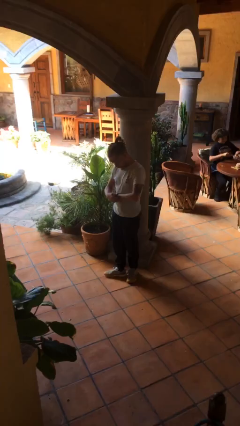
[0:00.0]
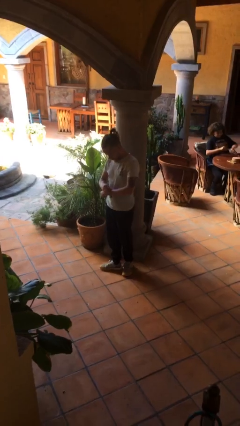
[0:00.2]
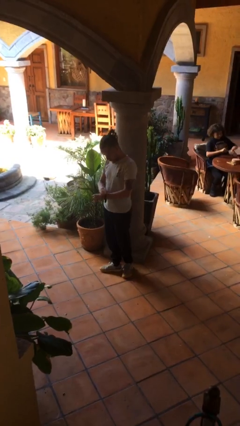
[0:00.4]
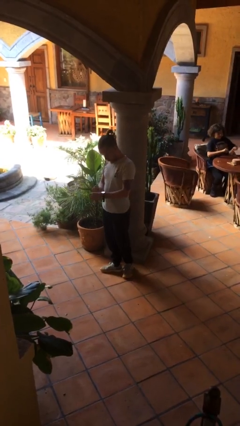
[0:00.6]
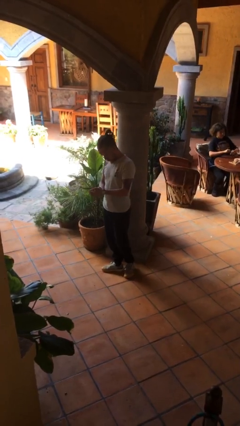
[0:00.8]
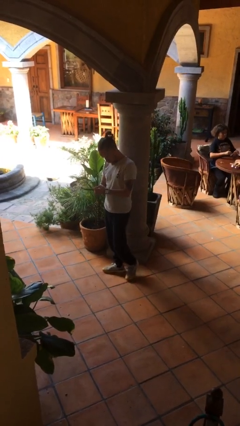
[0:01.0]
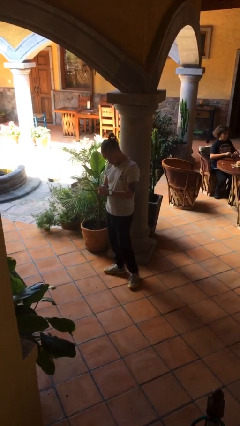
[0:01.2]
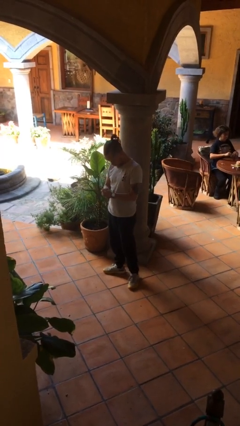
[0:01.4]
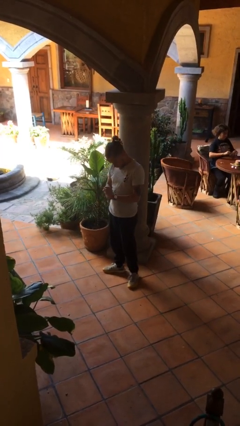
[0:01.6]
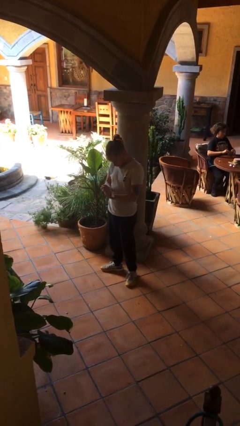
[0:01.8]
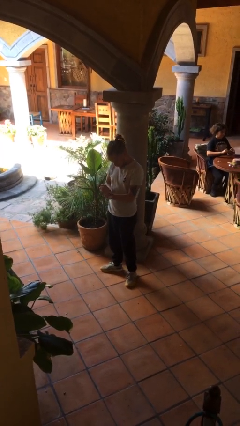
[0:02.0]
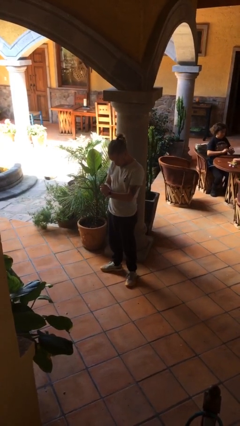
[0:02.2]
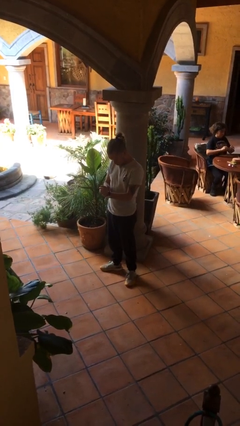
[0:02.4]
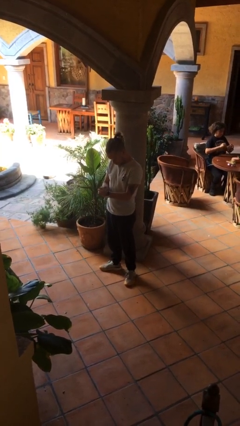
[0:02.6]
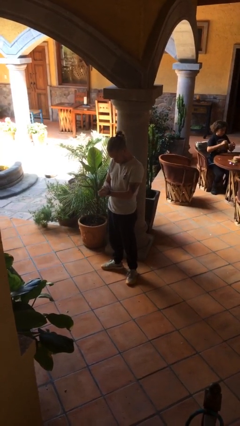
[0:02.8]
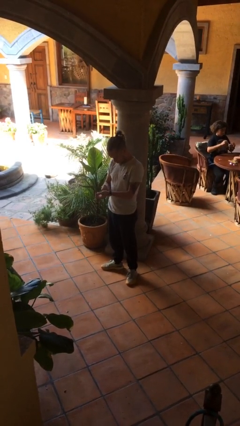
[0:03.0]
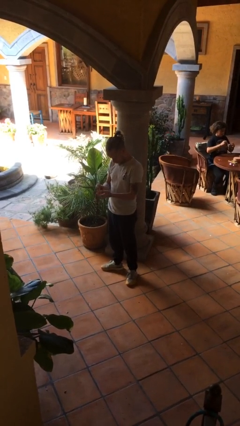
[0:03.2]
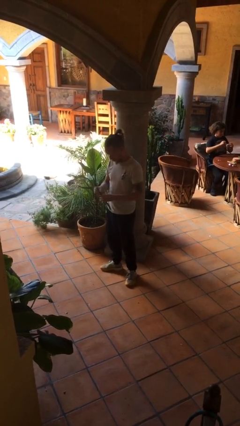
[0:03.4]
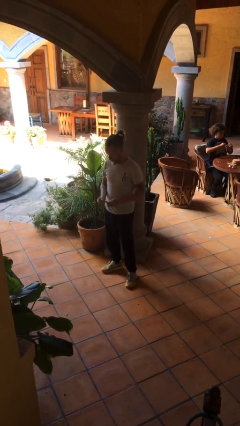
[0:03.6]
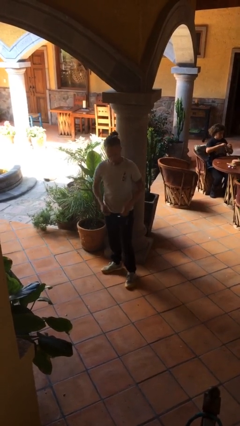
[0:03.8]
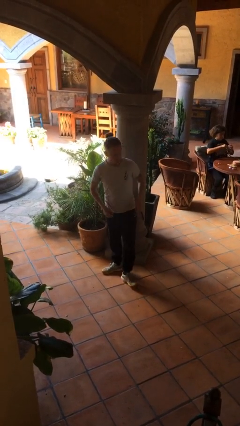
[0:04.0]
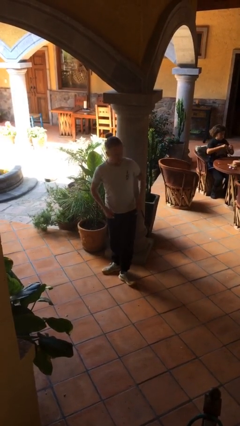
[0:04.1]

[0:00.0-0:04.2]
person takes off wristwatch

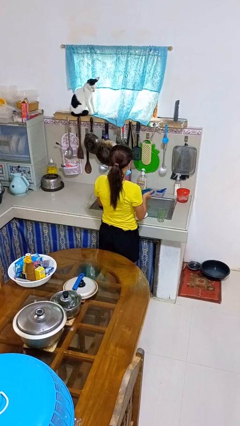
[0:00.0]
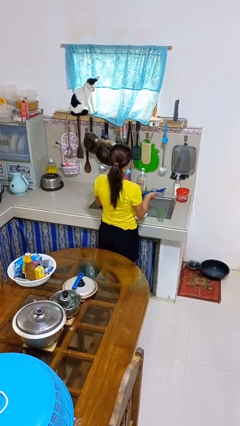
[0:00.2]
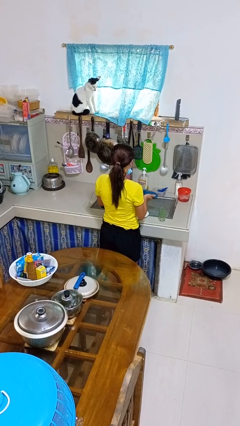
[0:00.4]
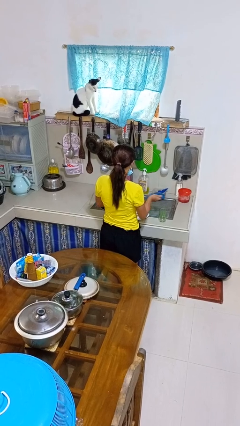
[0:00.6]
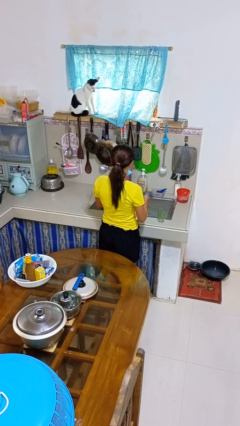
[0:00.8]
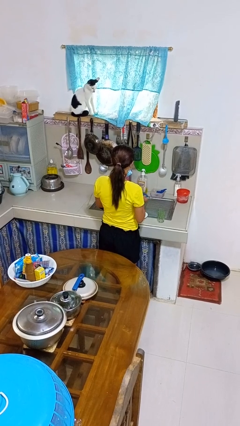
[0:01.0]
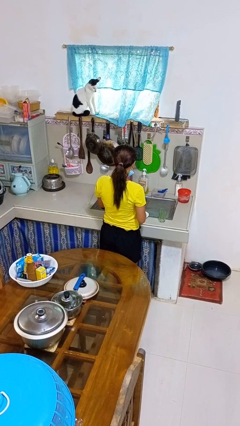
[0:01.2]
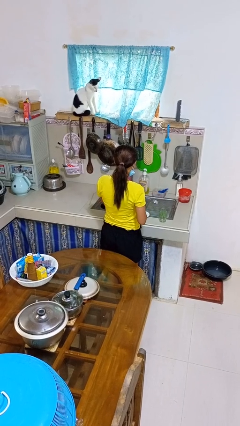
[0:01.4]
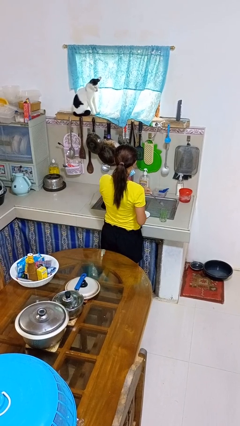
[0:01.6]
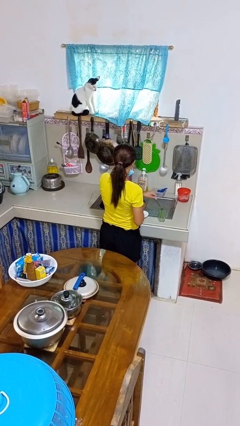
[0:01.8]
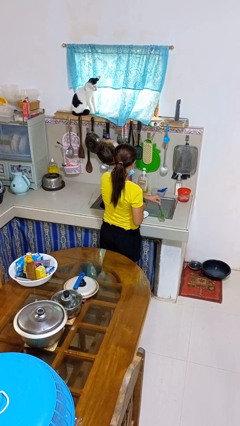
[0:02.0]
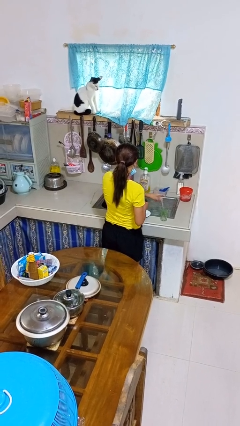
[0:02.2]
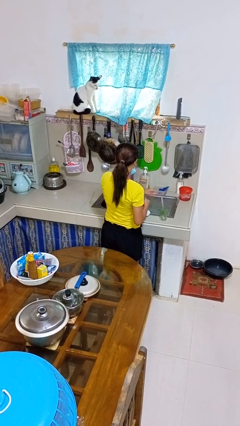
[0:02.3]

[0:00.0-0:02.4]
person dries dish

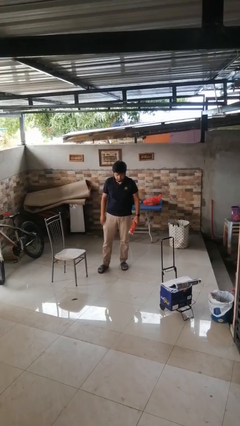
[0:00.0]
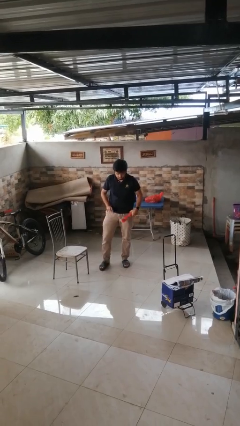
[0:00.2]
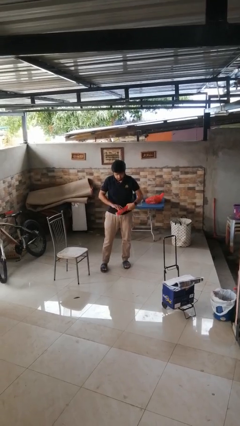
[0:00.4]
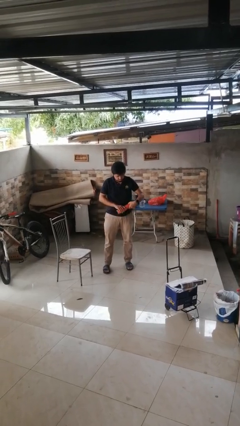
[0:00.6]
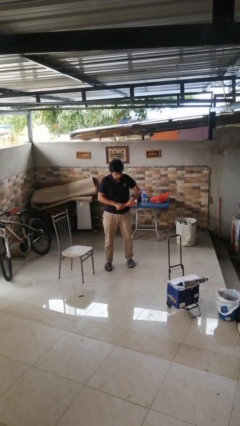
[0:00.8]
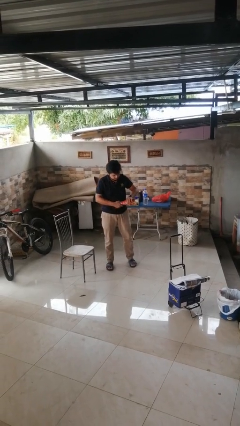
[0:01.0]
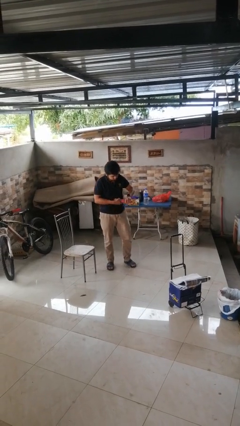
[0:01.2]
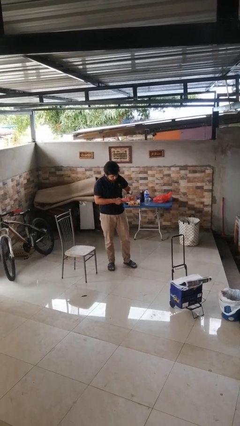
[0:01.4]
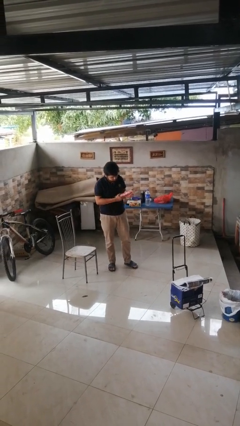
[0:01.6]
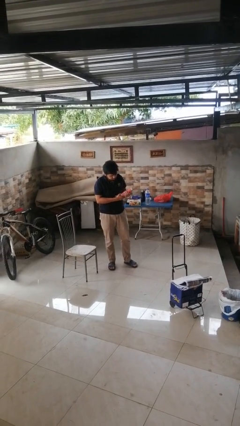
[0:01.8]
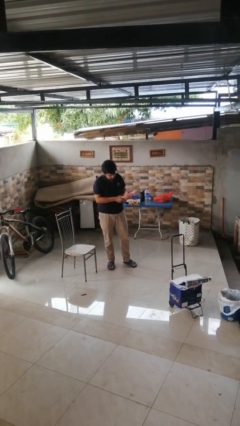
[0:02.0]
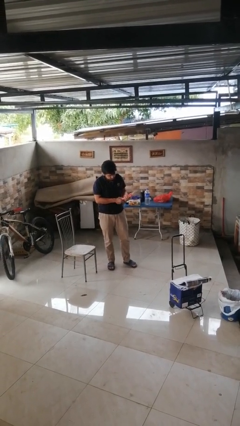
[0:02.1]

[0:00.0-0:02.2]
person squeezes object

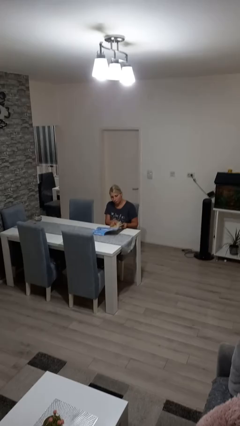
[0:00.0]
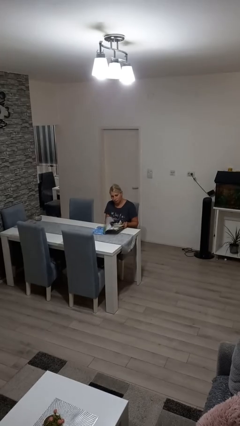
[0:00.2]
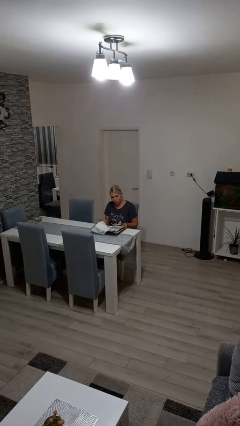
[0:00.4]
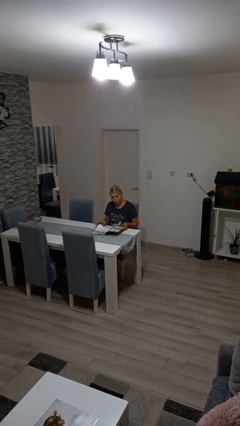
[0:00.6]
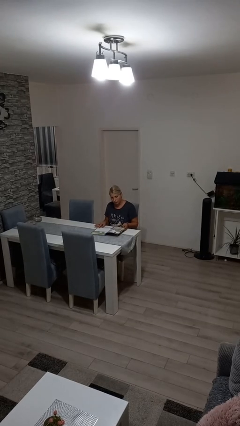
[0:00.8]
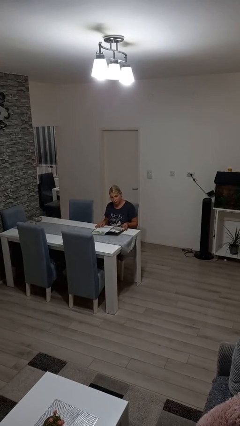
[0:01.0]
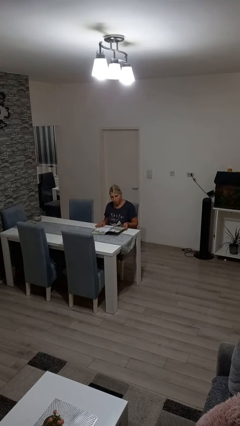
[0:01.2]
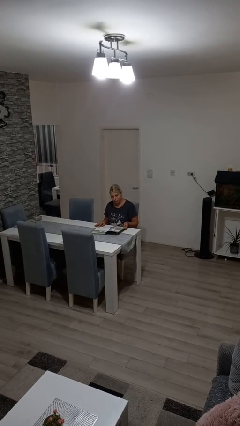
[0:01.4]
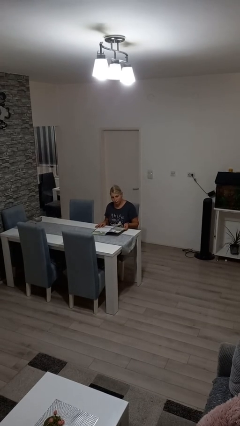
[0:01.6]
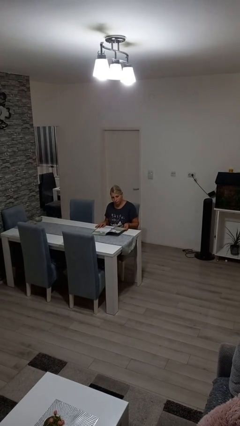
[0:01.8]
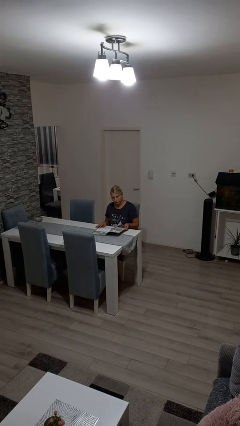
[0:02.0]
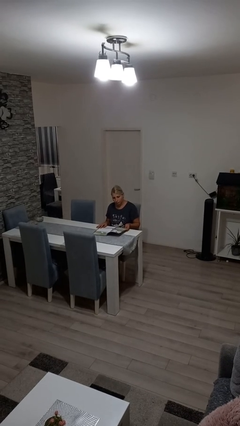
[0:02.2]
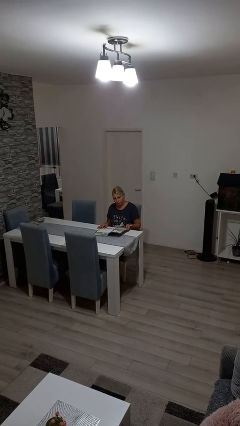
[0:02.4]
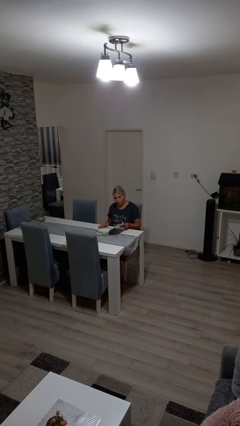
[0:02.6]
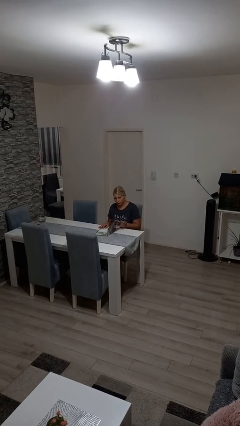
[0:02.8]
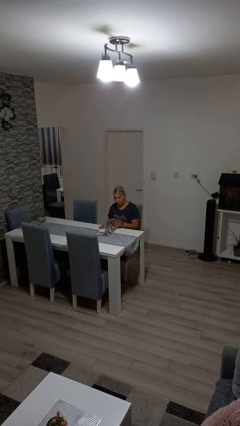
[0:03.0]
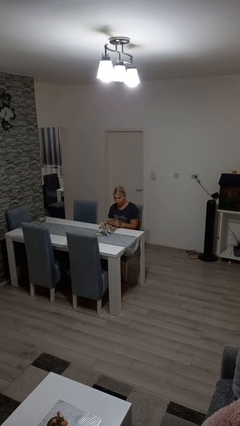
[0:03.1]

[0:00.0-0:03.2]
person reads magazine

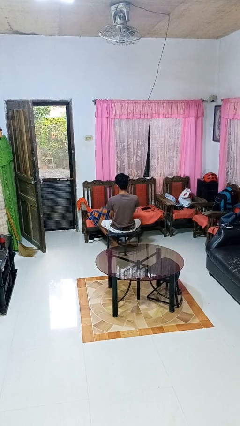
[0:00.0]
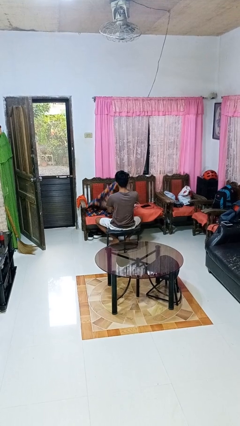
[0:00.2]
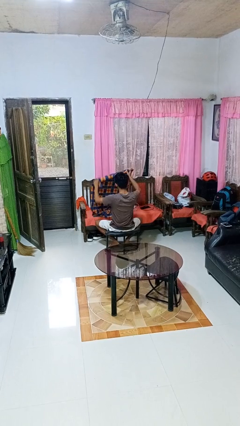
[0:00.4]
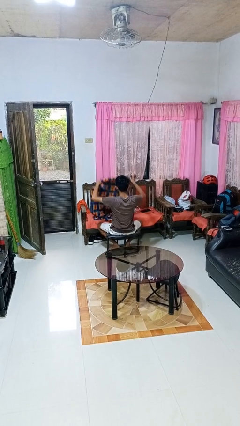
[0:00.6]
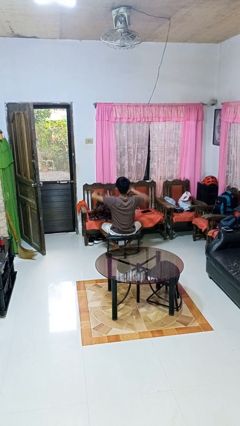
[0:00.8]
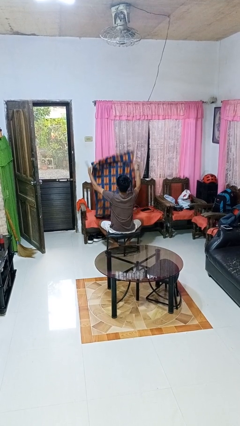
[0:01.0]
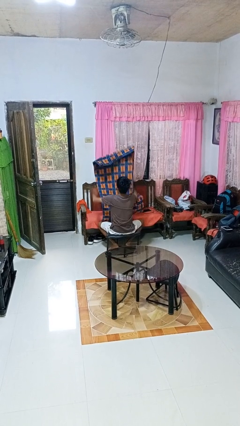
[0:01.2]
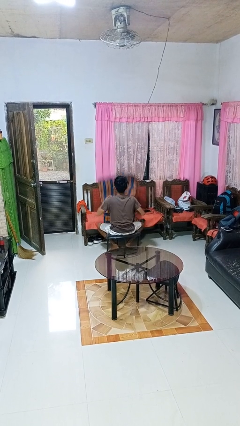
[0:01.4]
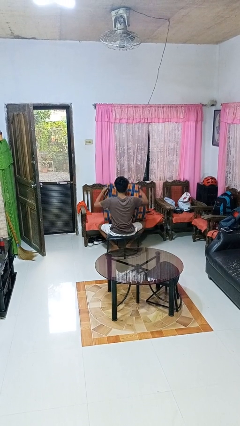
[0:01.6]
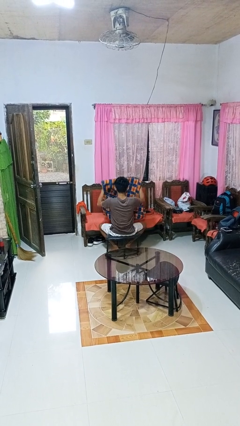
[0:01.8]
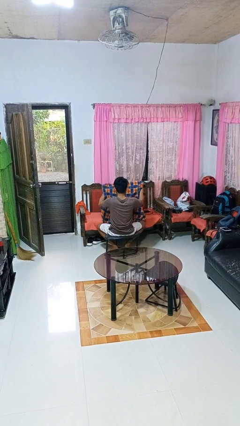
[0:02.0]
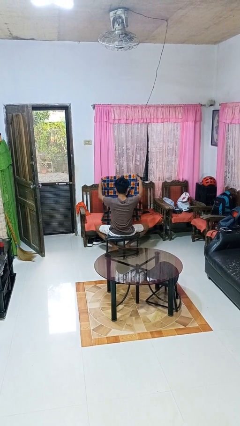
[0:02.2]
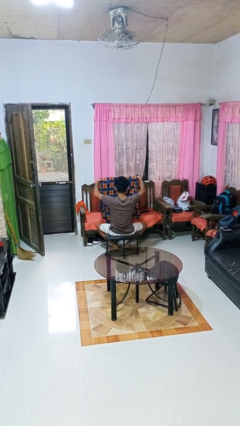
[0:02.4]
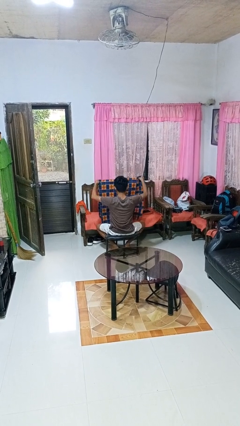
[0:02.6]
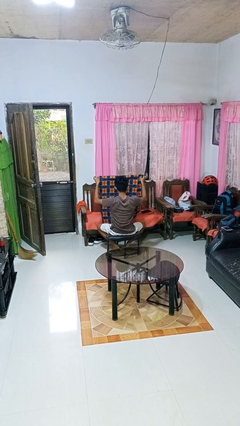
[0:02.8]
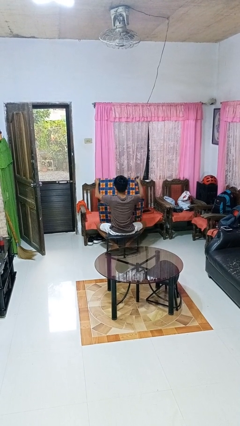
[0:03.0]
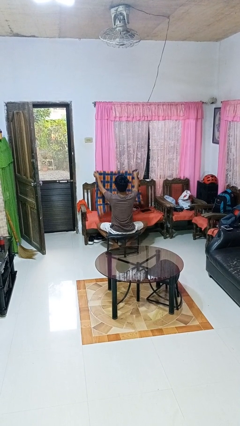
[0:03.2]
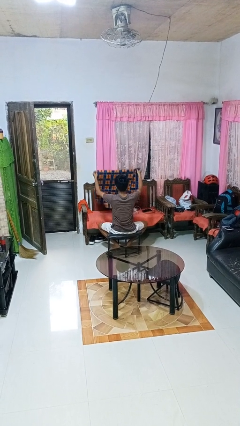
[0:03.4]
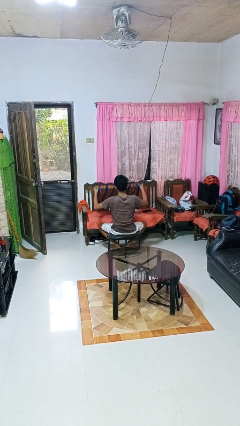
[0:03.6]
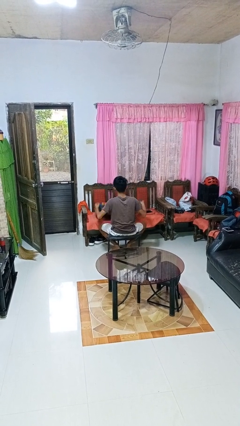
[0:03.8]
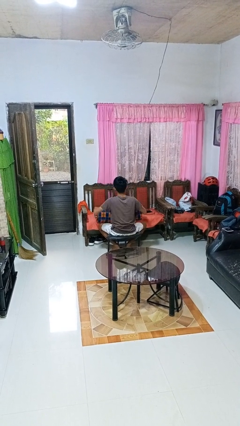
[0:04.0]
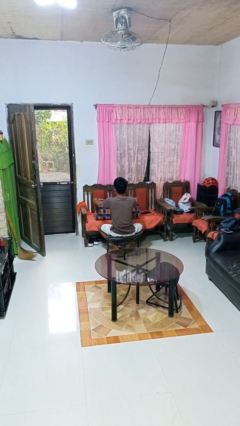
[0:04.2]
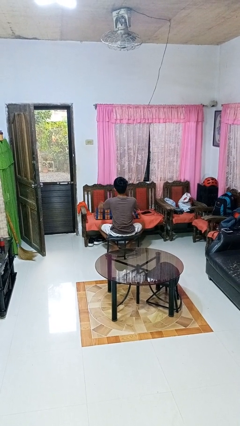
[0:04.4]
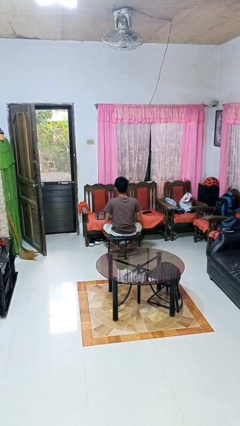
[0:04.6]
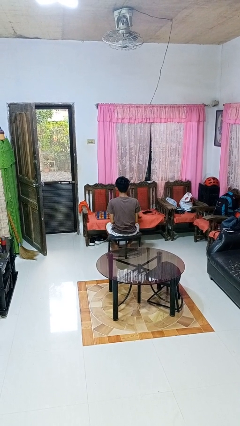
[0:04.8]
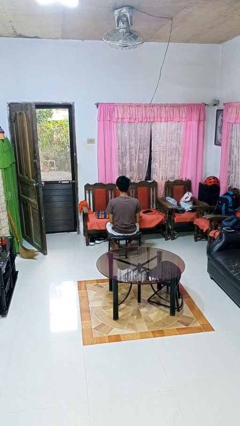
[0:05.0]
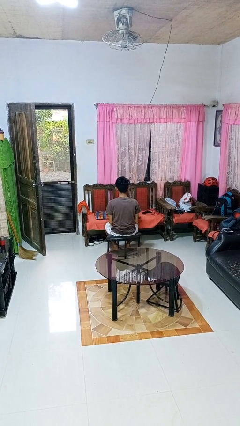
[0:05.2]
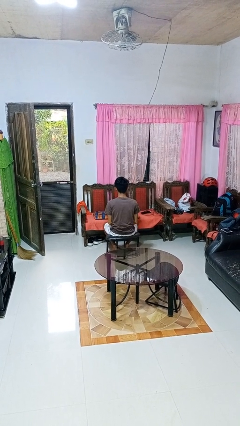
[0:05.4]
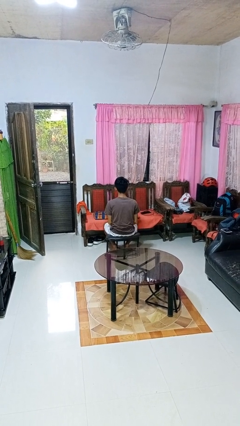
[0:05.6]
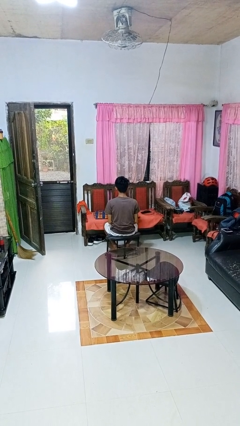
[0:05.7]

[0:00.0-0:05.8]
person folds blanket
